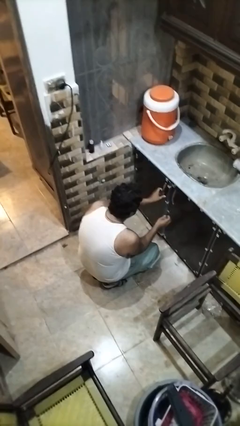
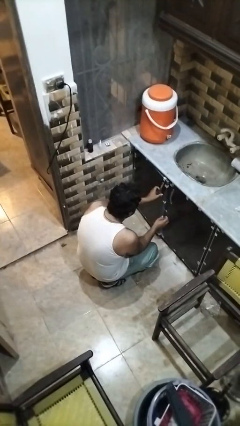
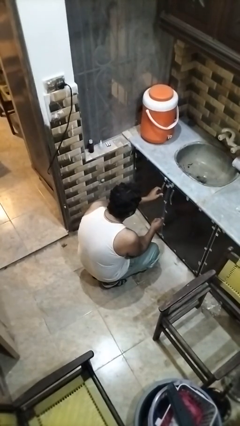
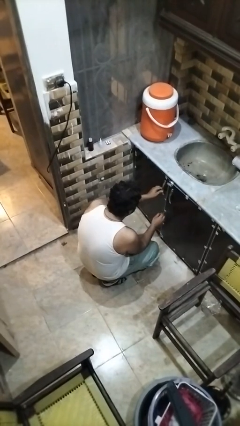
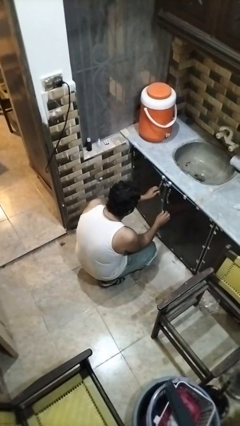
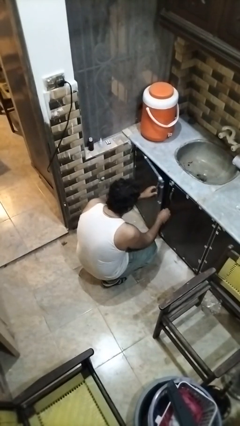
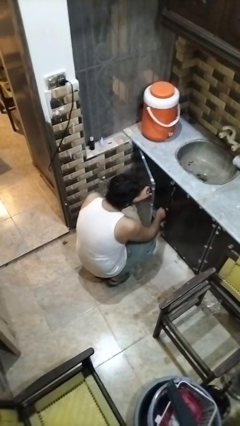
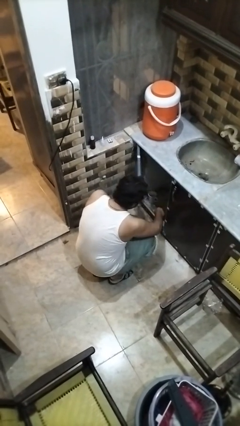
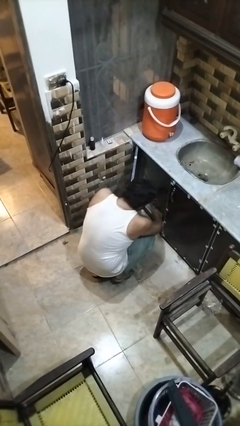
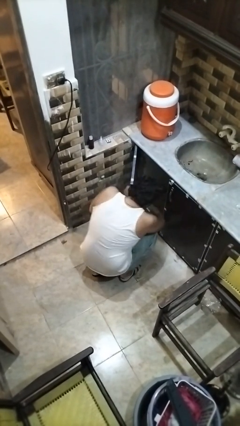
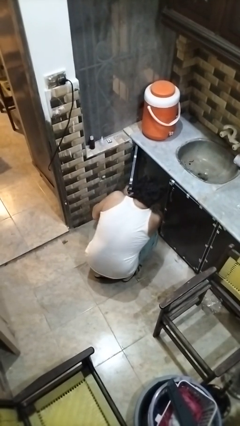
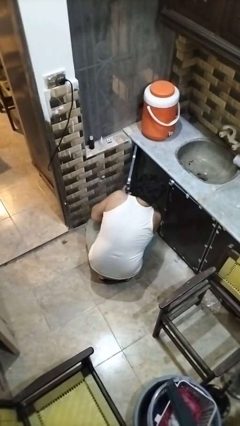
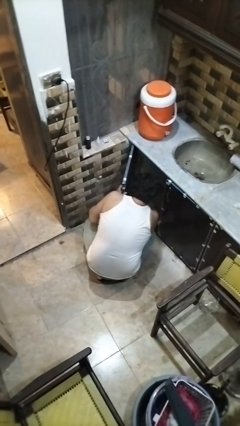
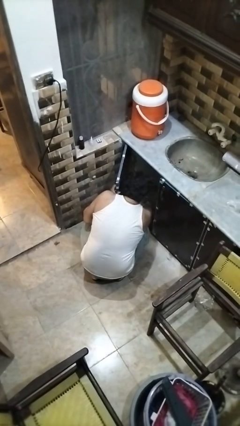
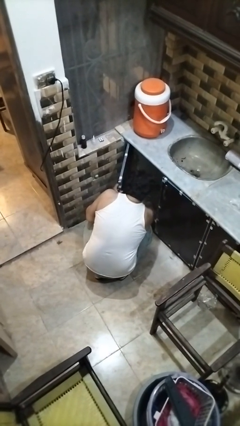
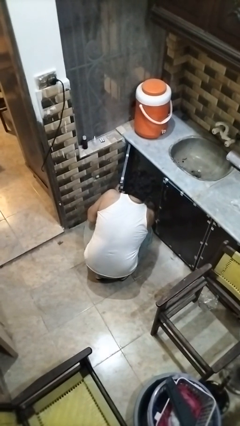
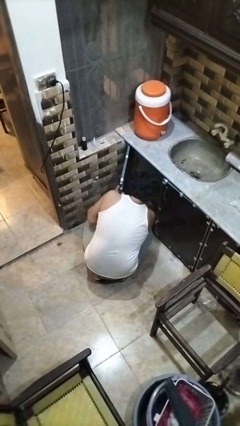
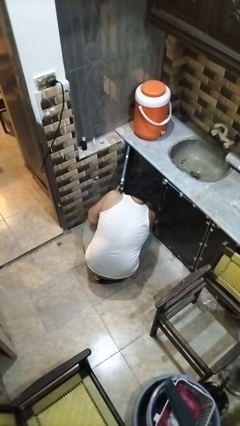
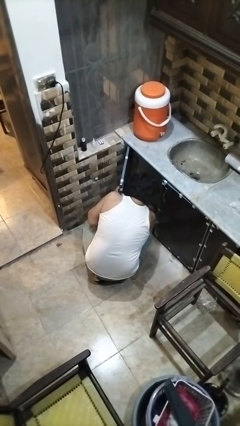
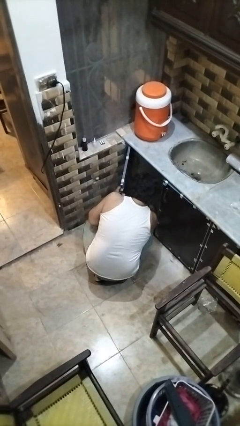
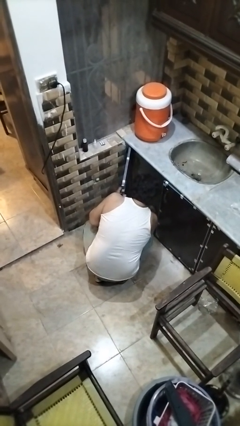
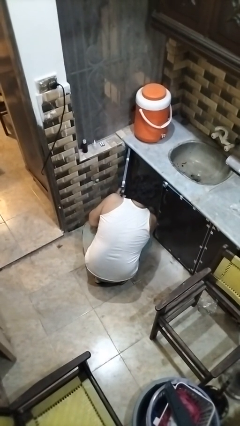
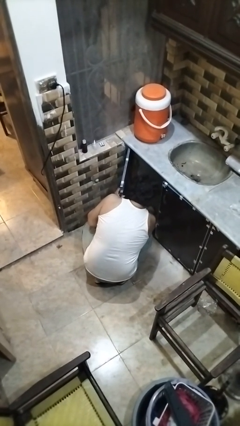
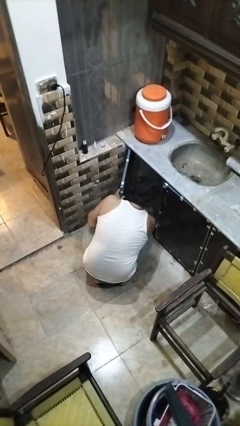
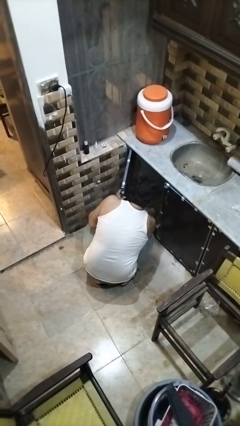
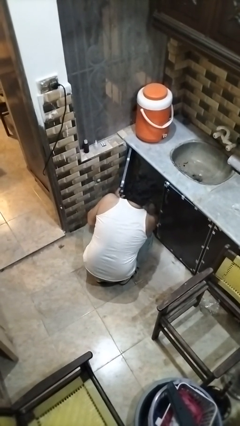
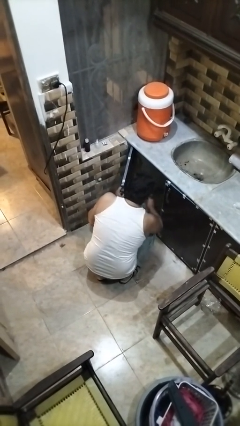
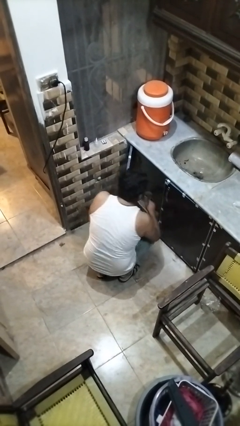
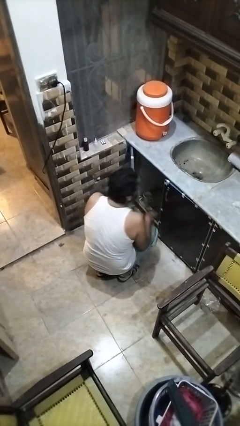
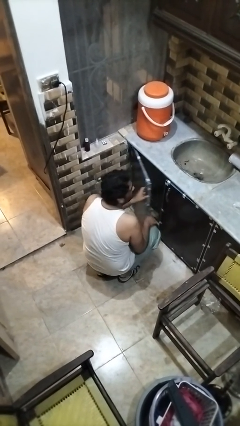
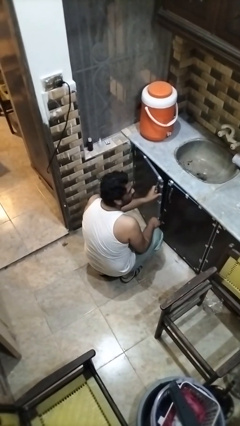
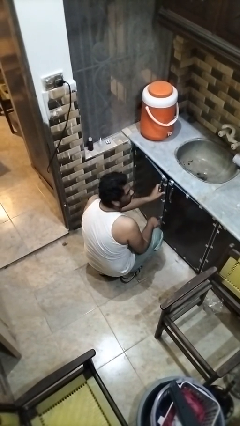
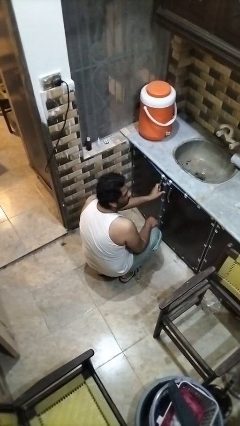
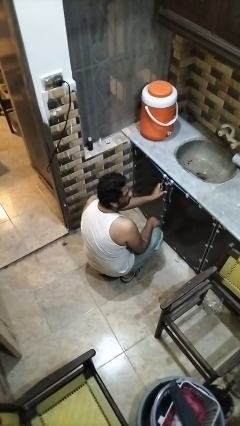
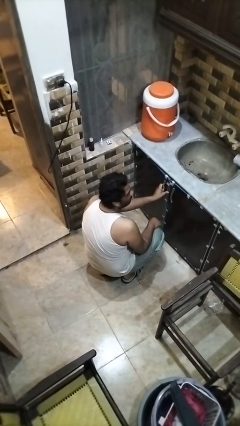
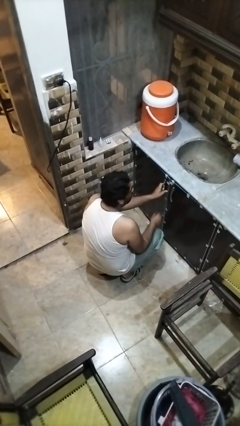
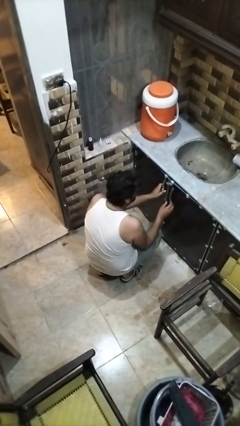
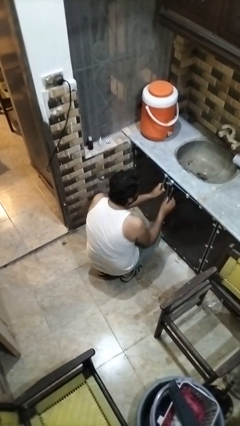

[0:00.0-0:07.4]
person searches in kitchen drawer

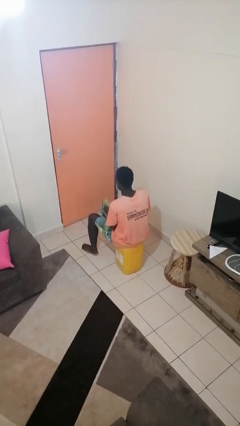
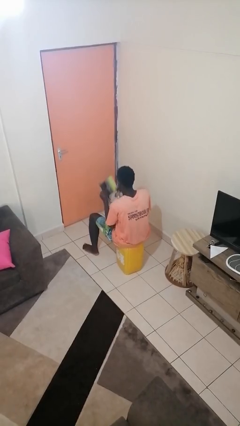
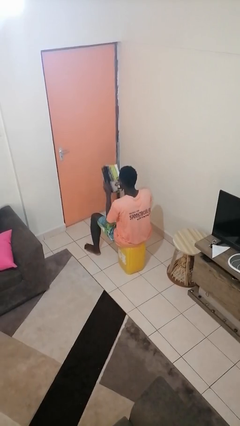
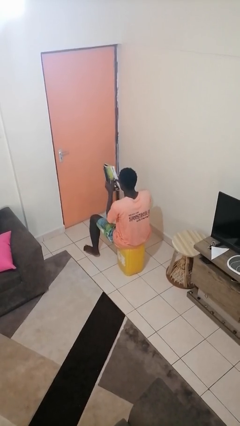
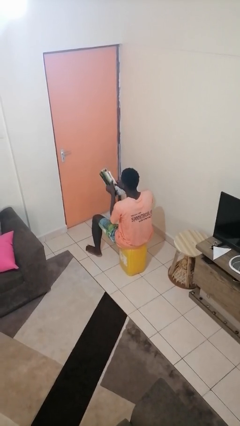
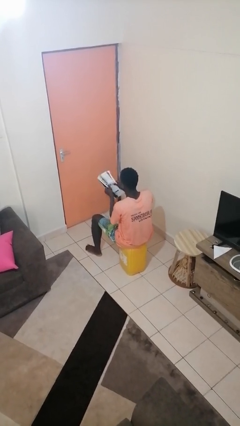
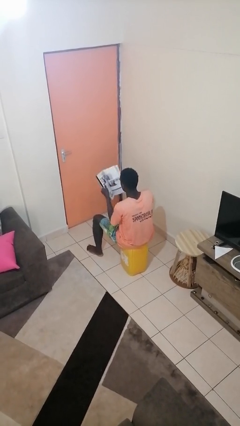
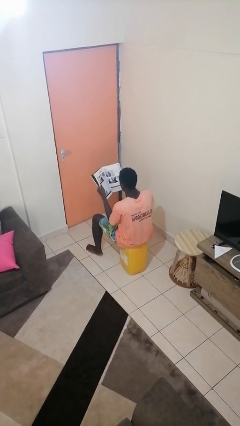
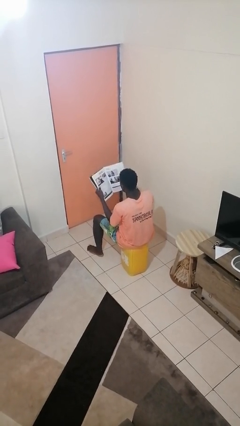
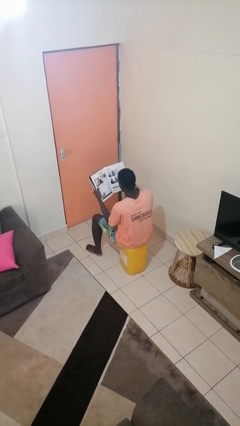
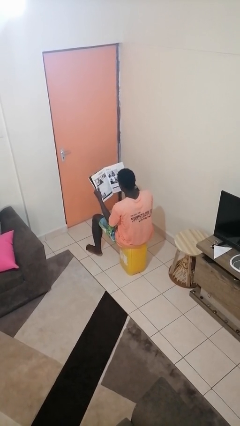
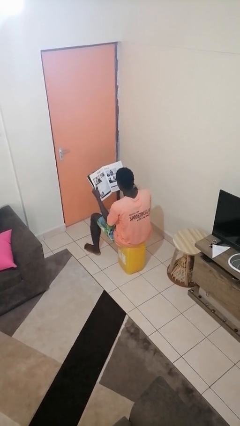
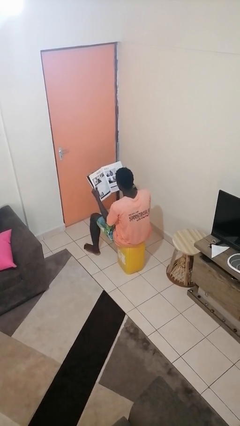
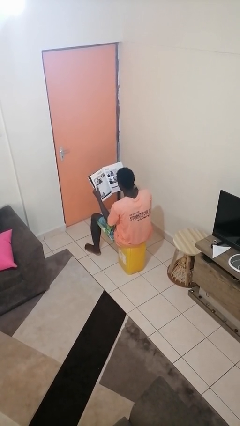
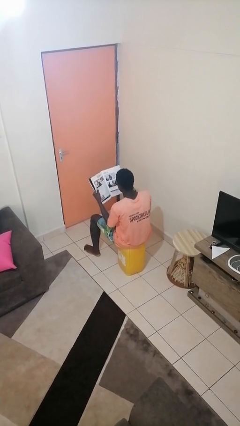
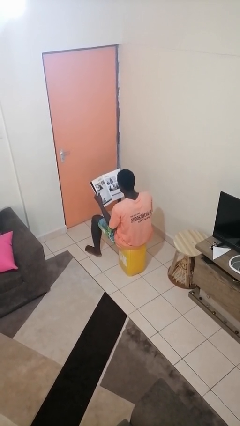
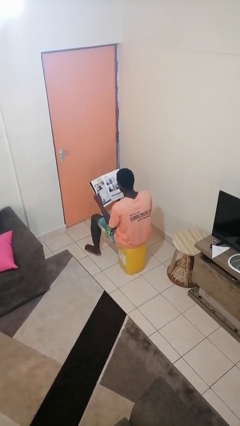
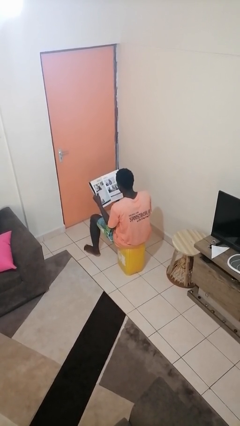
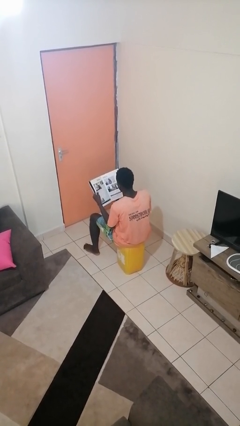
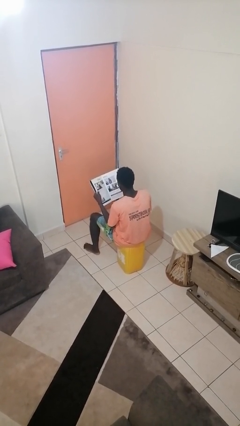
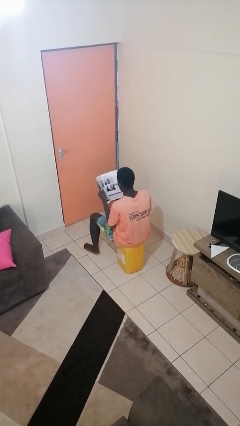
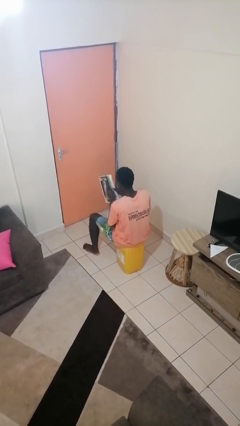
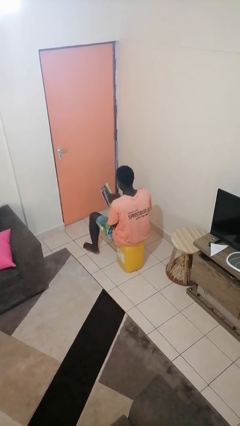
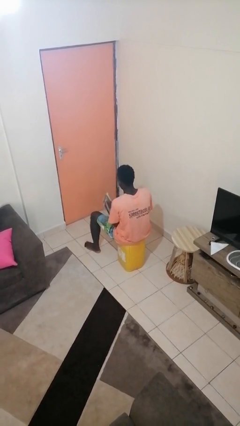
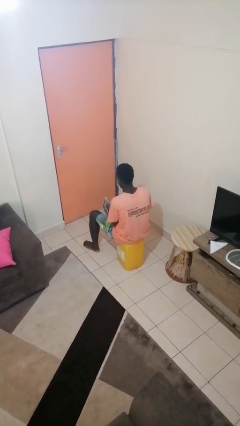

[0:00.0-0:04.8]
person reads magazine

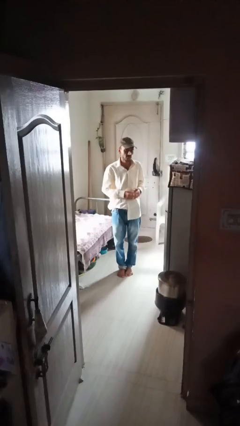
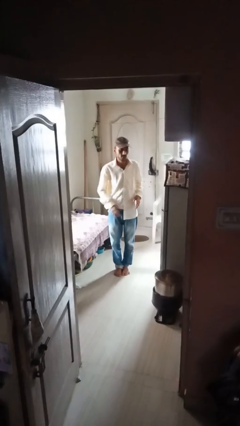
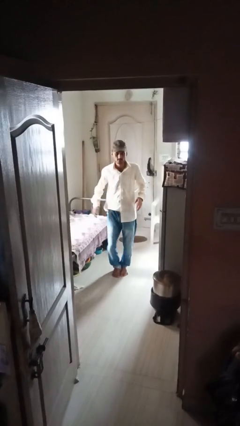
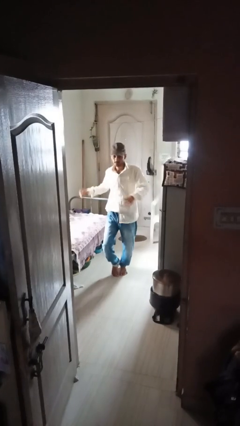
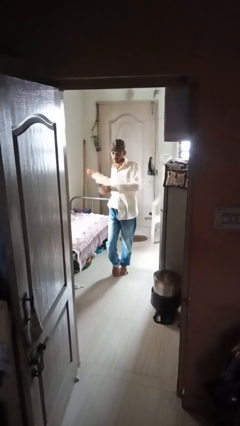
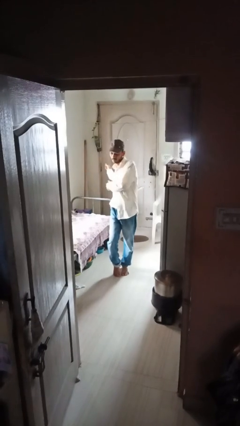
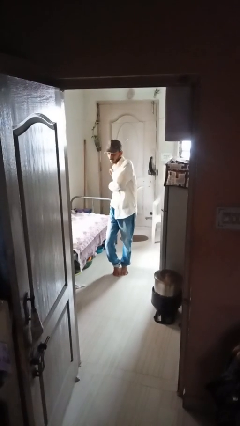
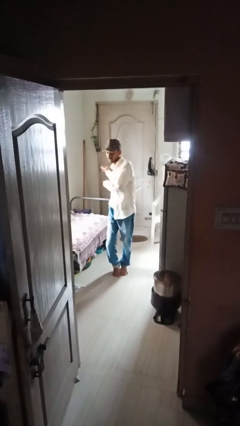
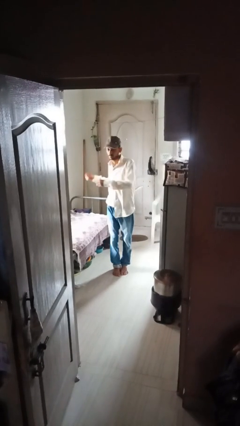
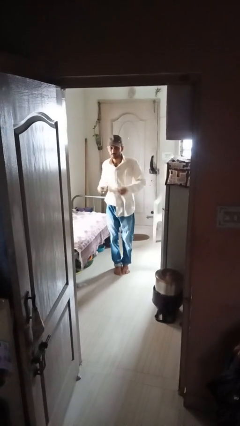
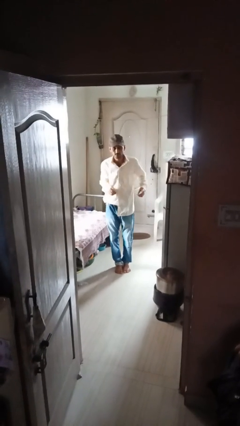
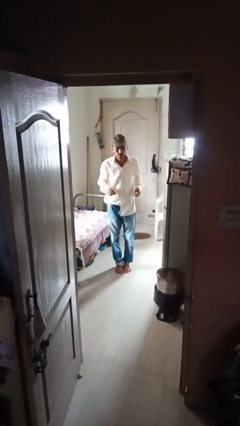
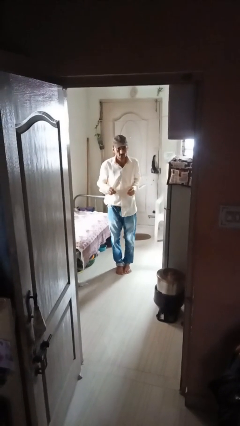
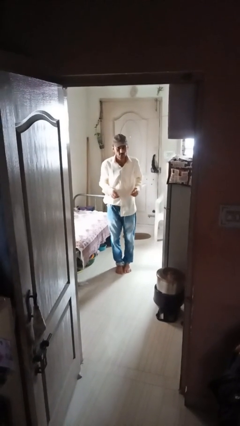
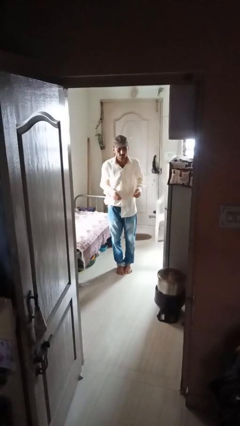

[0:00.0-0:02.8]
person dances in place

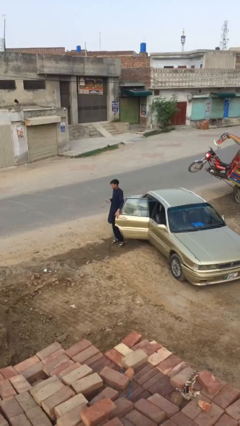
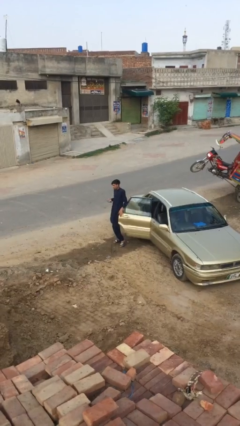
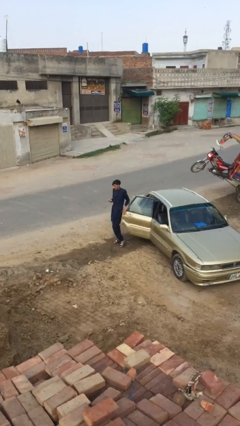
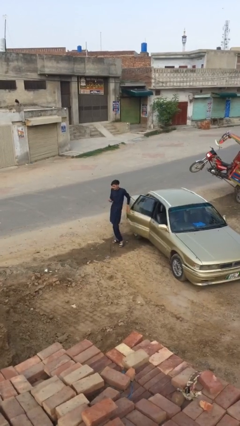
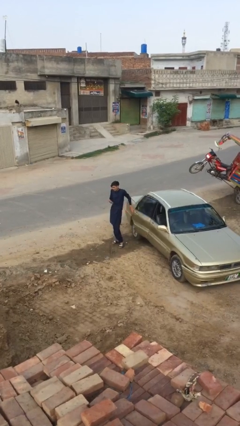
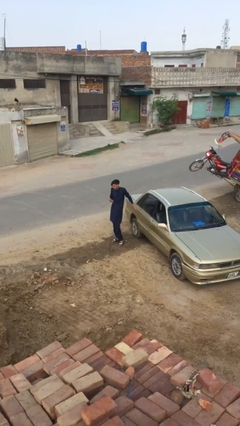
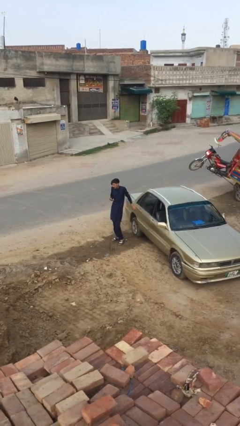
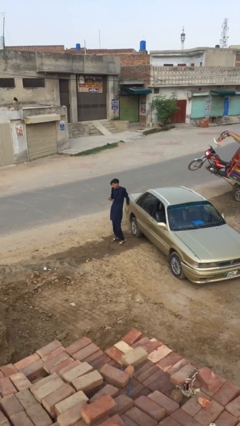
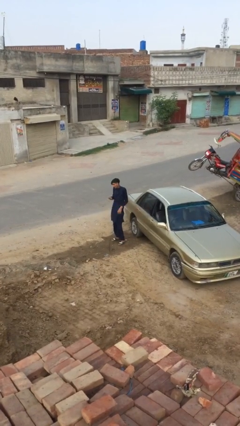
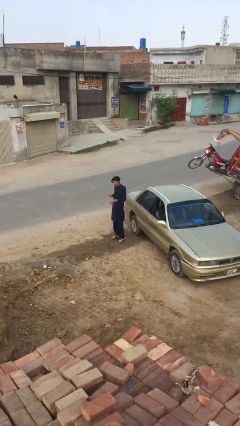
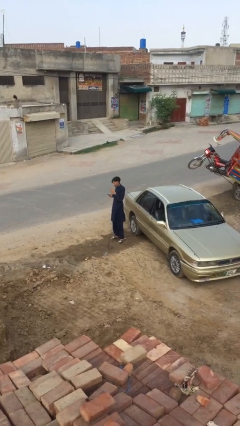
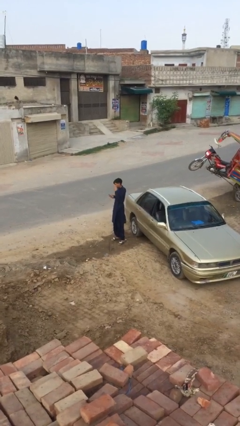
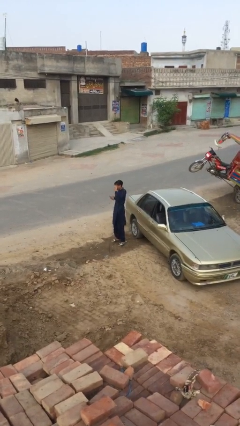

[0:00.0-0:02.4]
person closes car door

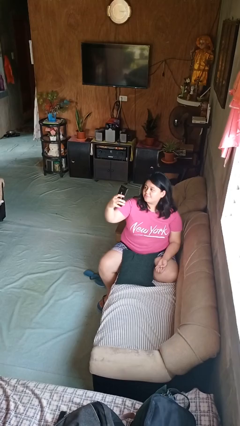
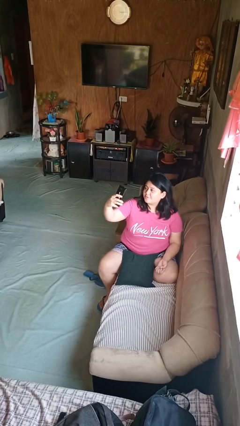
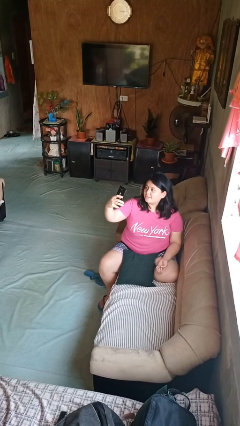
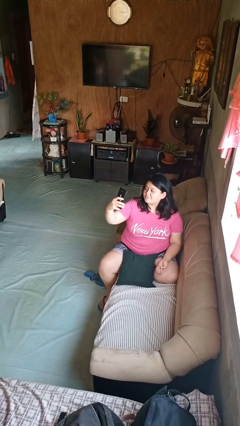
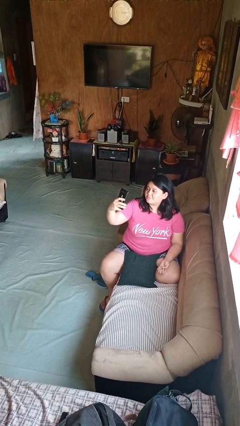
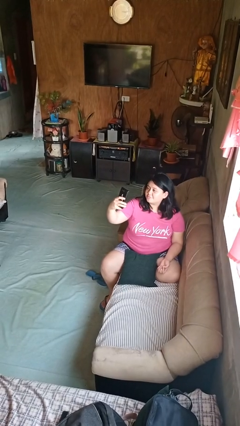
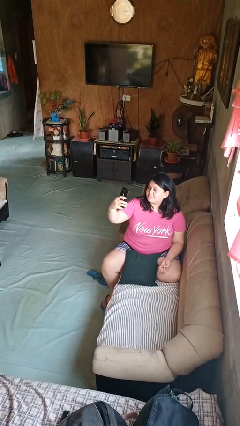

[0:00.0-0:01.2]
person takes selfie
